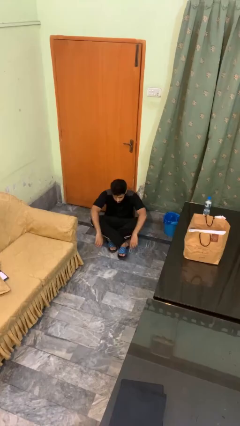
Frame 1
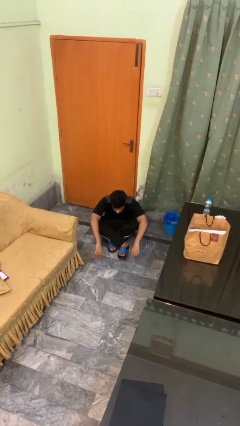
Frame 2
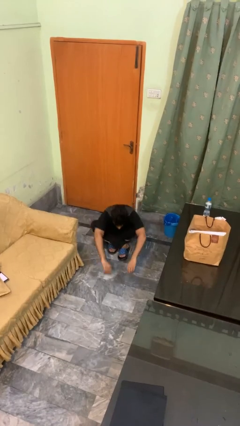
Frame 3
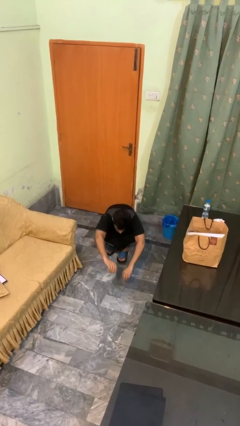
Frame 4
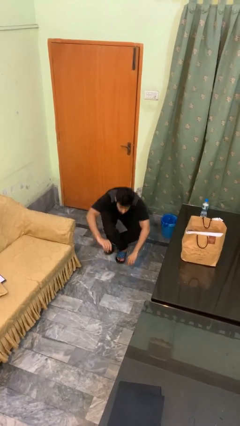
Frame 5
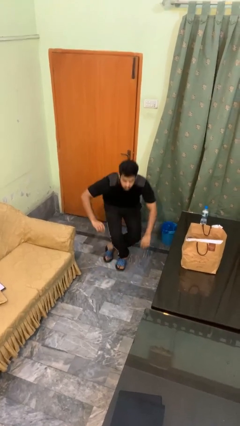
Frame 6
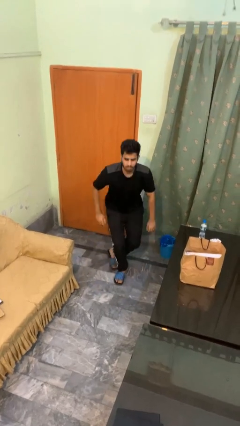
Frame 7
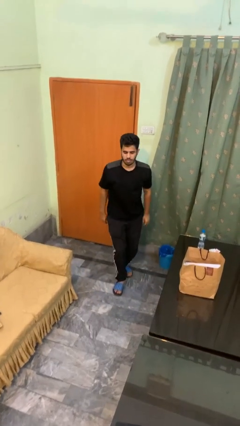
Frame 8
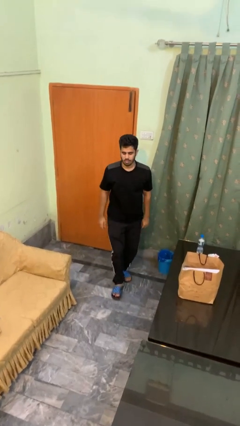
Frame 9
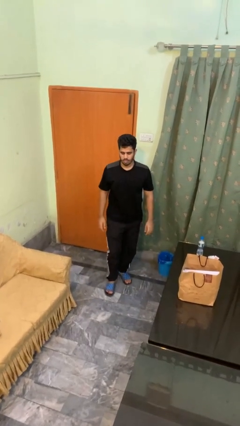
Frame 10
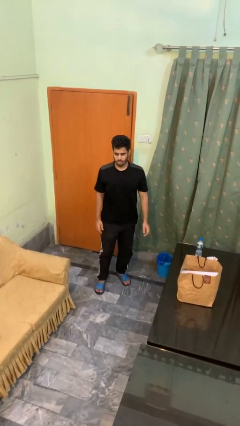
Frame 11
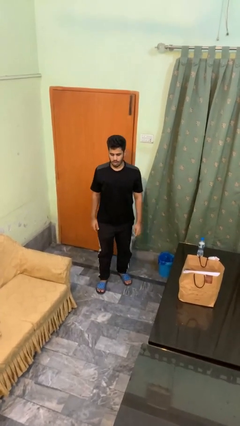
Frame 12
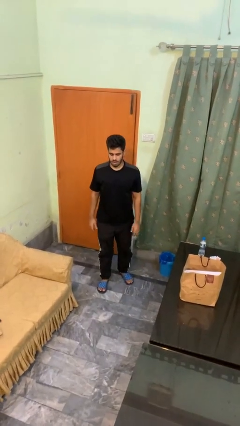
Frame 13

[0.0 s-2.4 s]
person stands up from floor

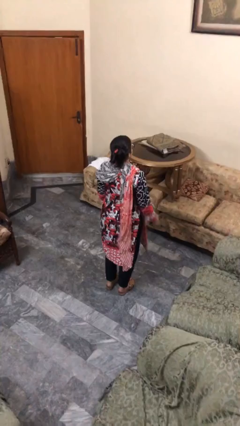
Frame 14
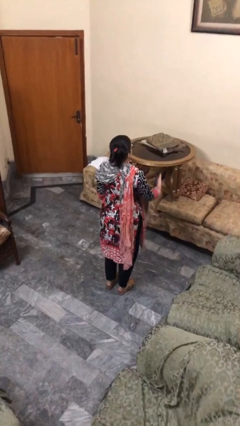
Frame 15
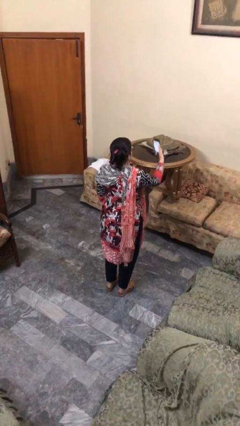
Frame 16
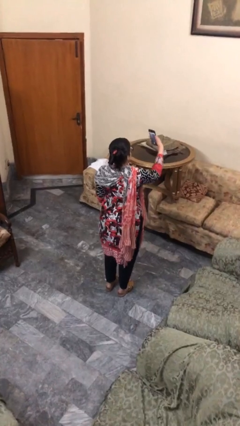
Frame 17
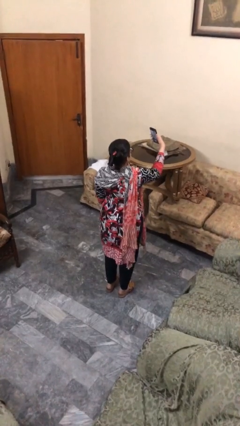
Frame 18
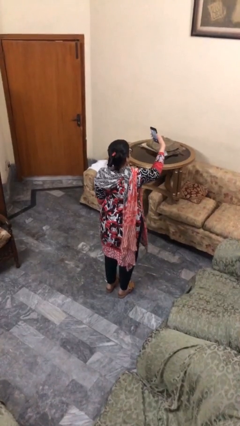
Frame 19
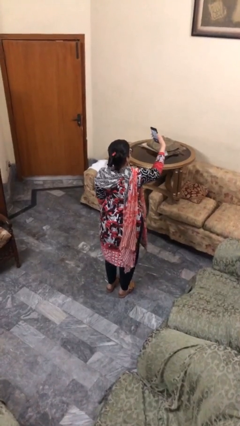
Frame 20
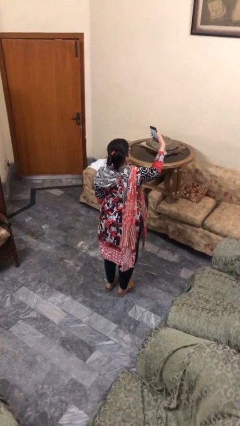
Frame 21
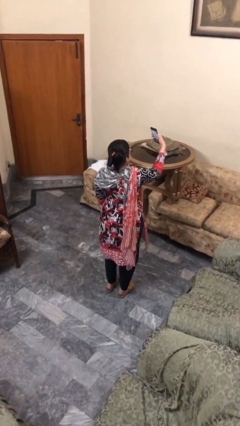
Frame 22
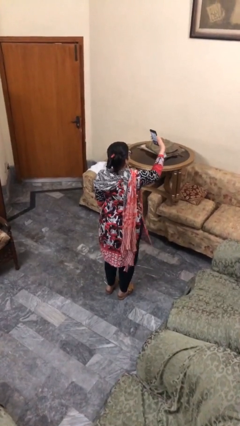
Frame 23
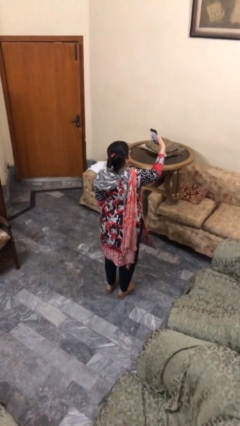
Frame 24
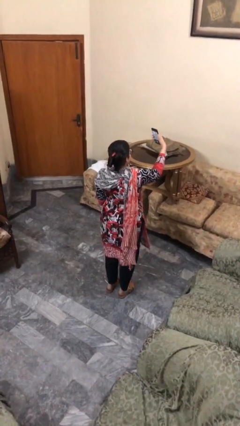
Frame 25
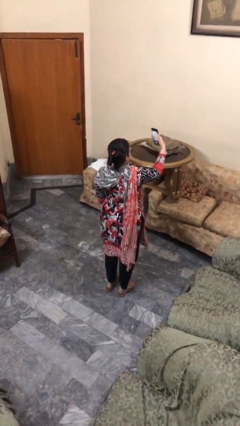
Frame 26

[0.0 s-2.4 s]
person takes selfie

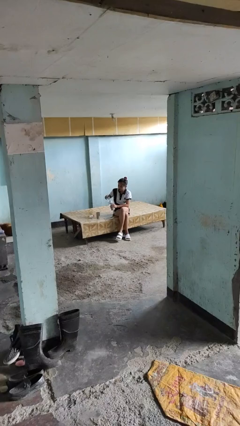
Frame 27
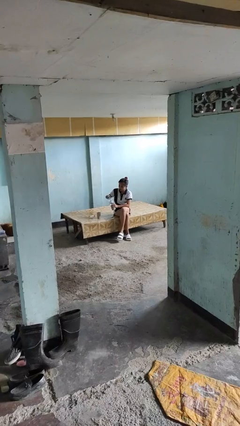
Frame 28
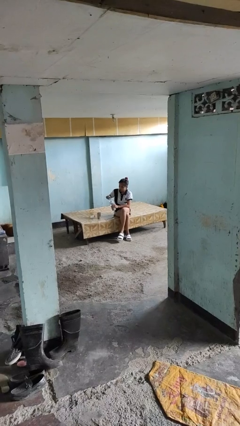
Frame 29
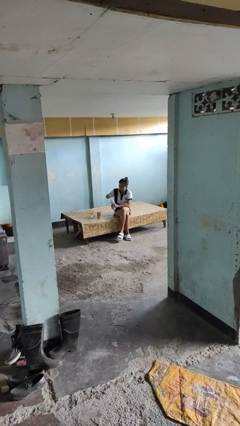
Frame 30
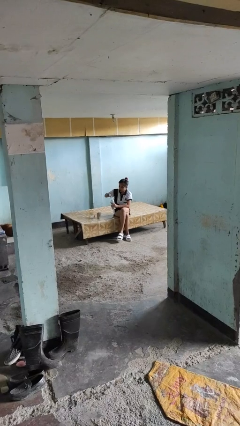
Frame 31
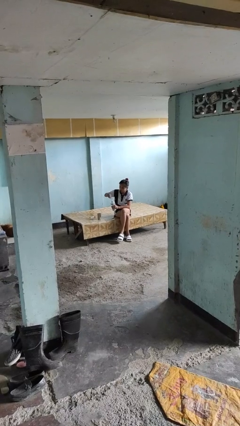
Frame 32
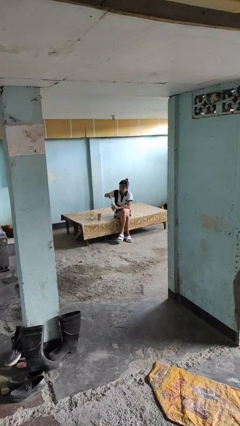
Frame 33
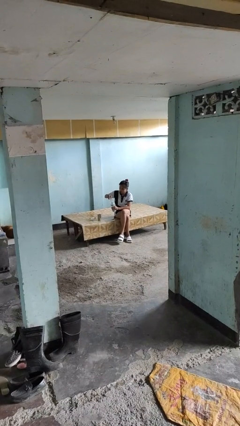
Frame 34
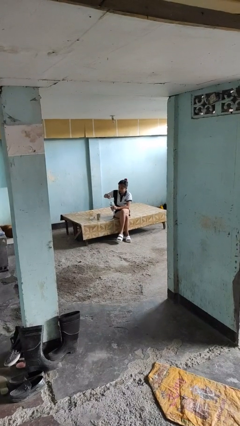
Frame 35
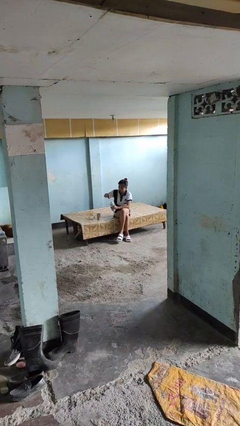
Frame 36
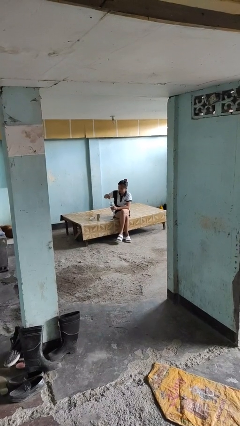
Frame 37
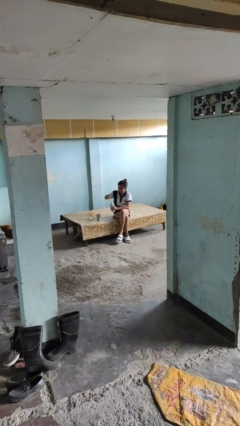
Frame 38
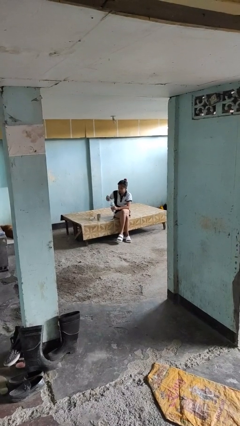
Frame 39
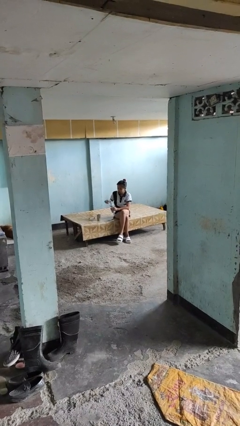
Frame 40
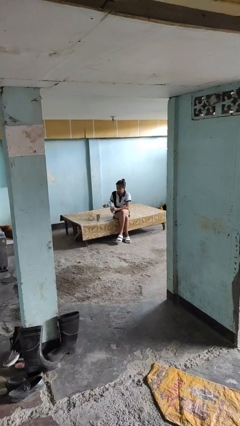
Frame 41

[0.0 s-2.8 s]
person unscrews lid from bottle

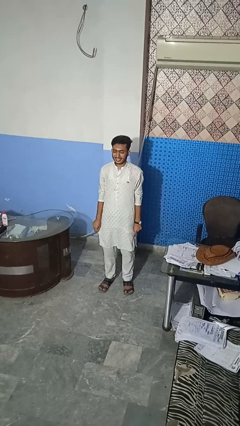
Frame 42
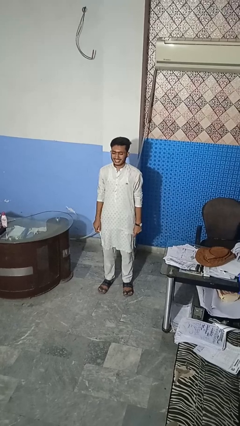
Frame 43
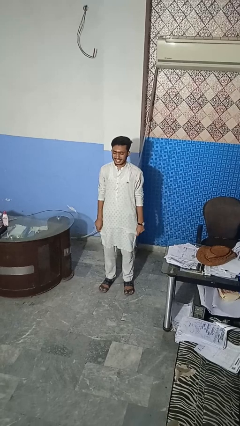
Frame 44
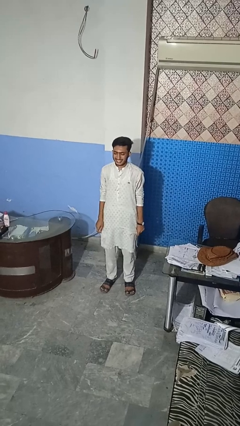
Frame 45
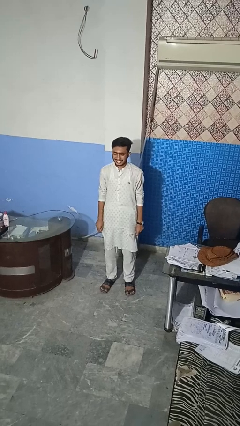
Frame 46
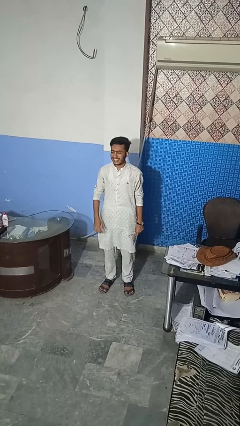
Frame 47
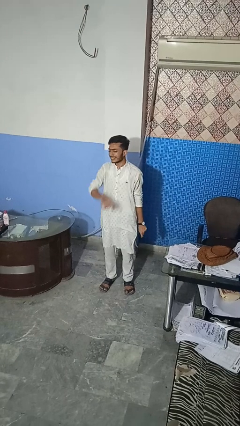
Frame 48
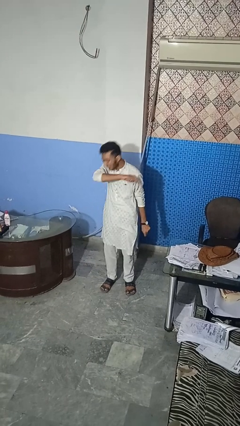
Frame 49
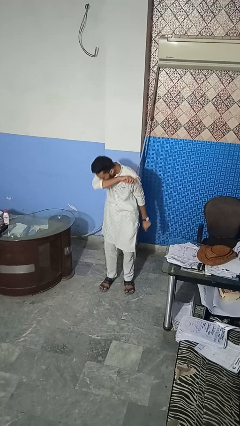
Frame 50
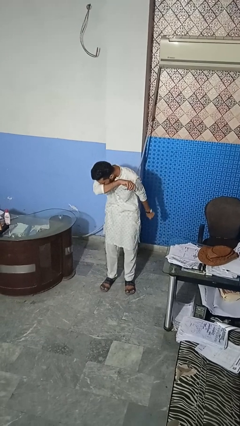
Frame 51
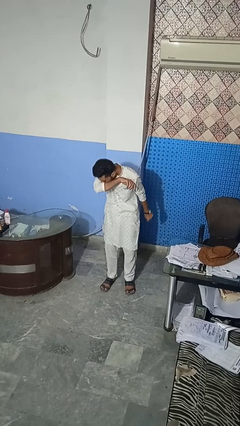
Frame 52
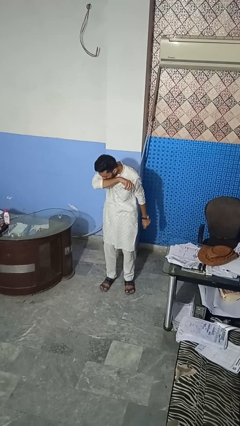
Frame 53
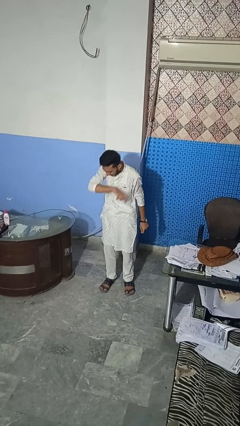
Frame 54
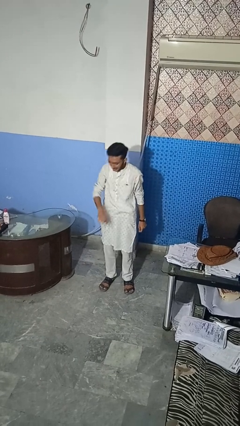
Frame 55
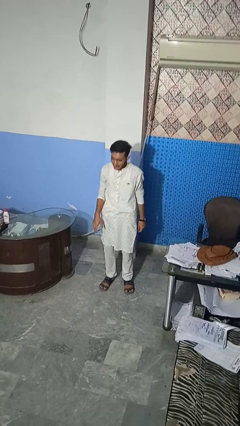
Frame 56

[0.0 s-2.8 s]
person sneezes into arm

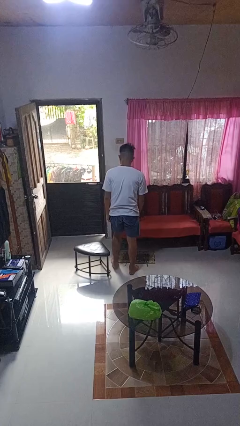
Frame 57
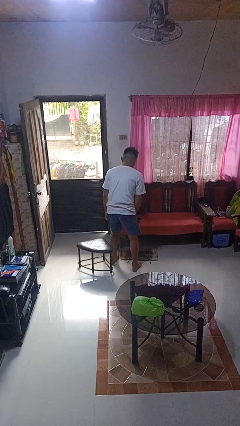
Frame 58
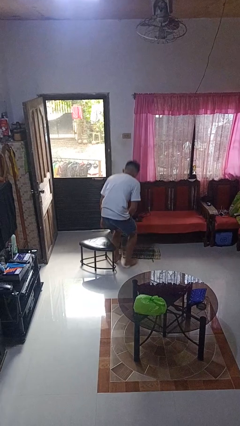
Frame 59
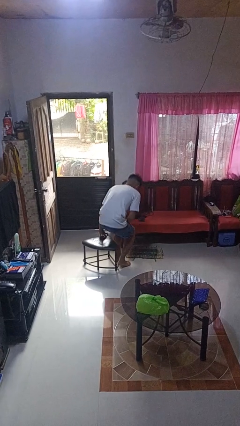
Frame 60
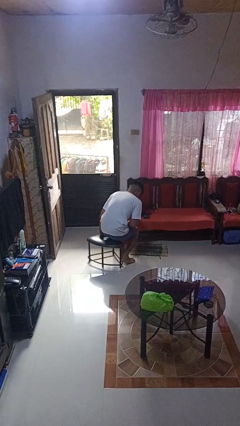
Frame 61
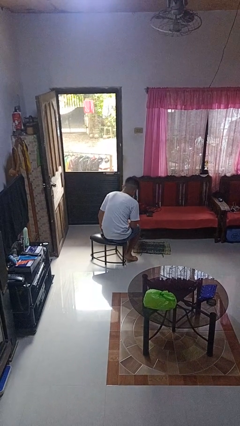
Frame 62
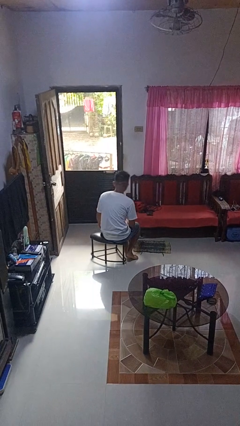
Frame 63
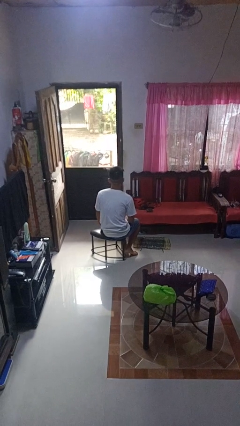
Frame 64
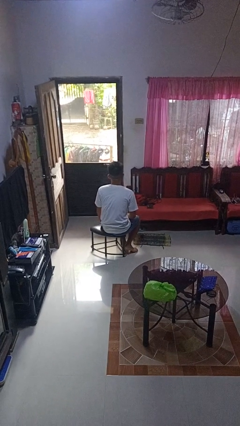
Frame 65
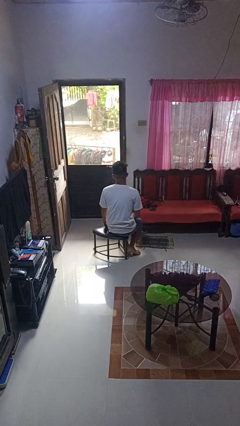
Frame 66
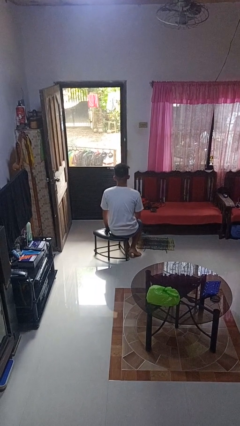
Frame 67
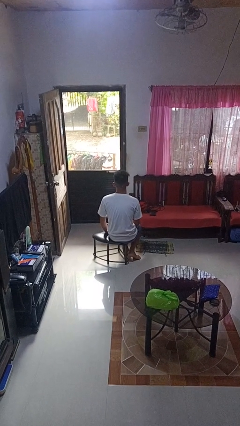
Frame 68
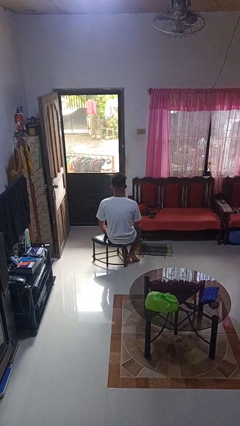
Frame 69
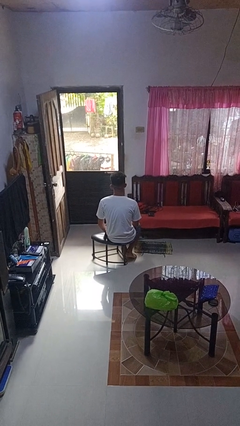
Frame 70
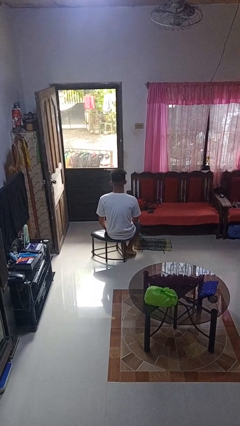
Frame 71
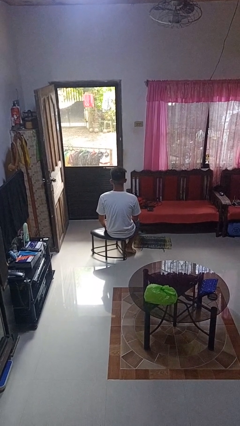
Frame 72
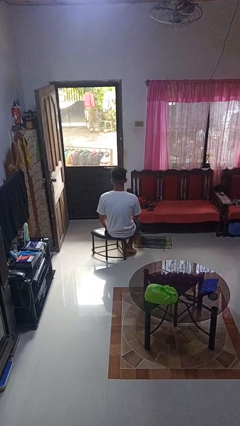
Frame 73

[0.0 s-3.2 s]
person sits down

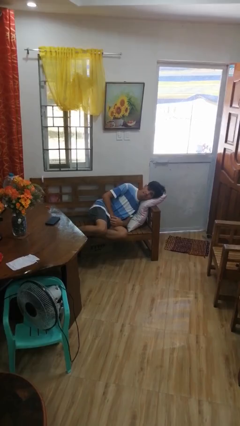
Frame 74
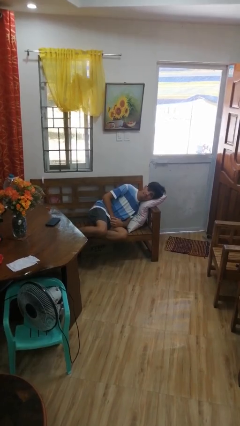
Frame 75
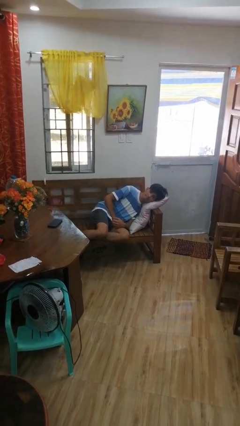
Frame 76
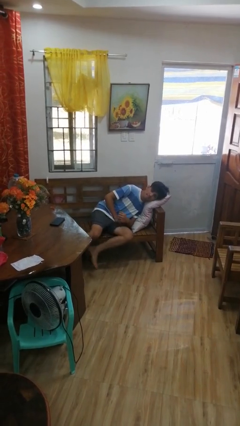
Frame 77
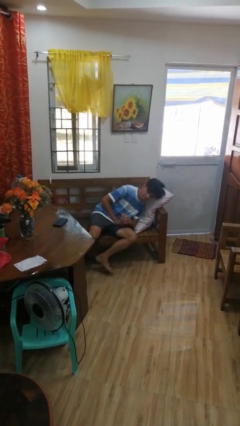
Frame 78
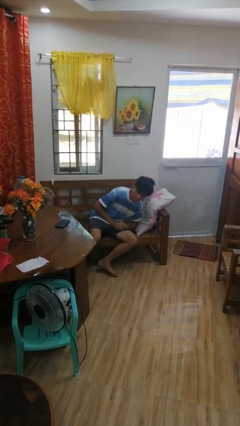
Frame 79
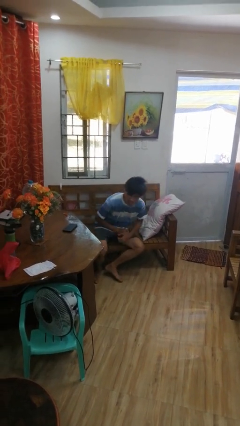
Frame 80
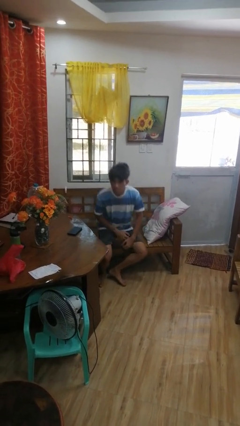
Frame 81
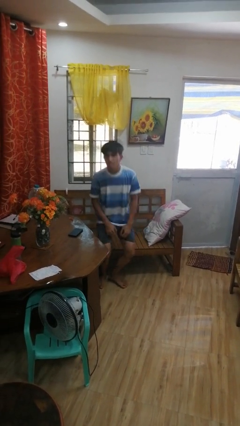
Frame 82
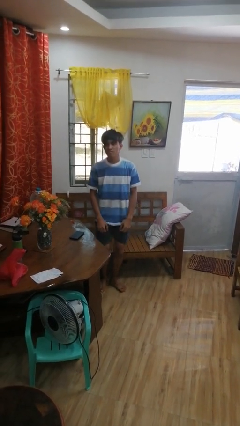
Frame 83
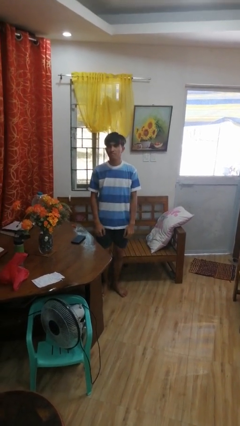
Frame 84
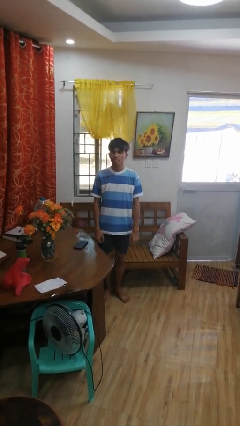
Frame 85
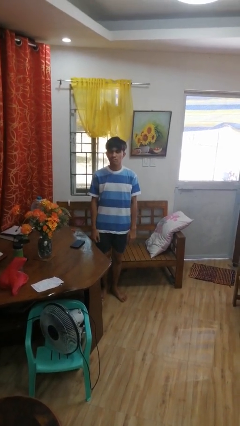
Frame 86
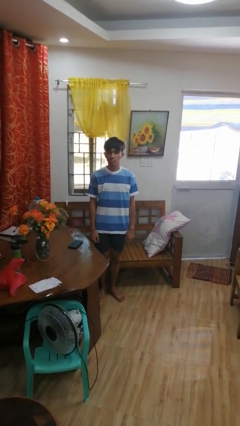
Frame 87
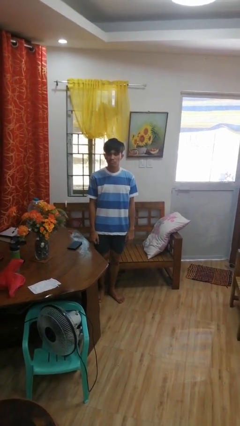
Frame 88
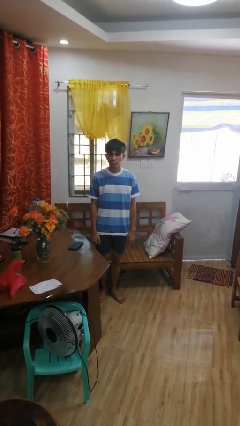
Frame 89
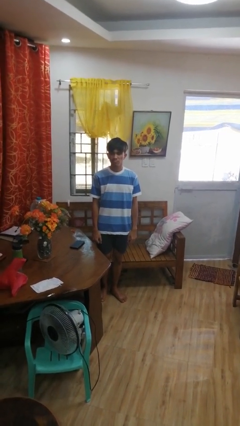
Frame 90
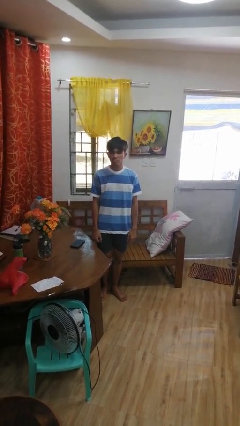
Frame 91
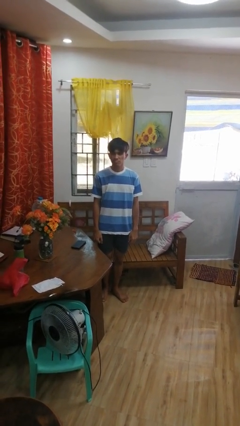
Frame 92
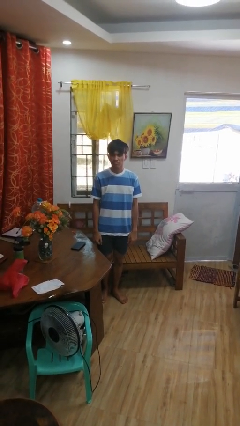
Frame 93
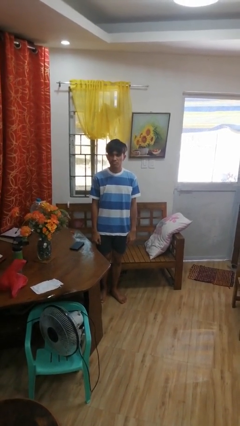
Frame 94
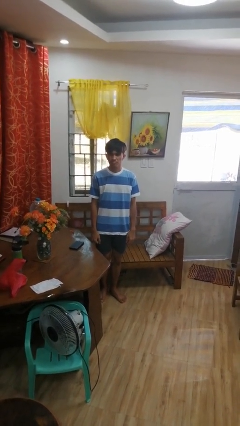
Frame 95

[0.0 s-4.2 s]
person stands up
